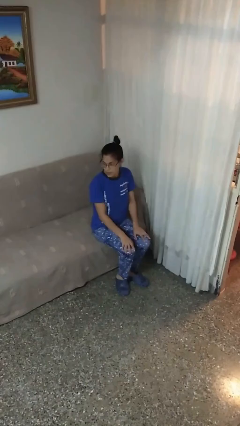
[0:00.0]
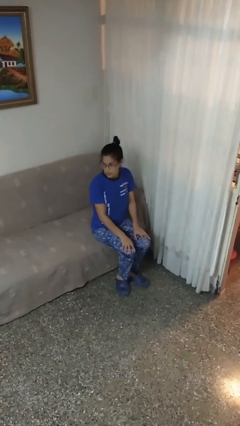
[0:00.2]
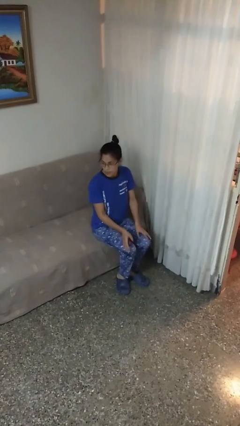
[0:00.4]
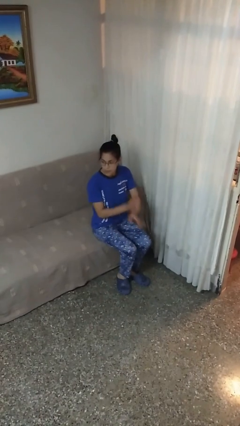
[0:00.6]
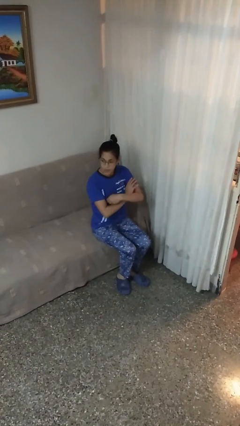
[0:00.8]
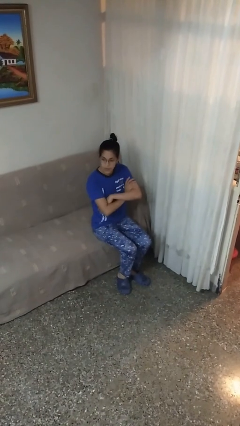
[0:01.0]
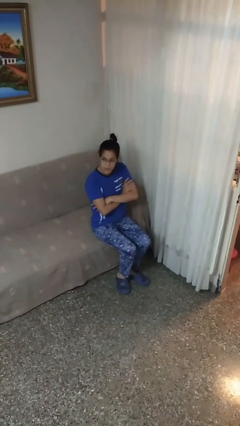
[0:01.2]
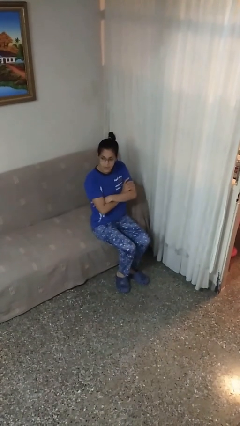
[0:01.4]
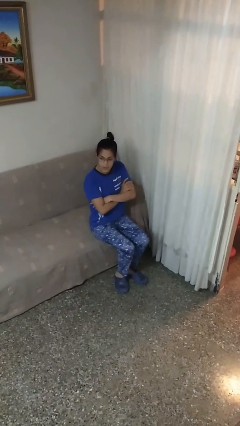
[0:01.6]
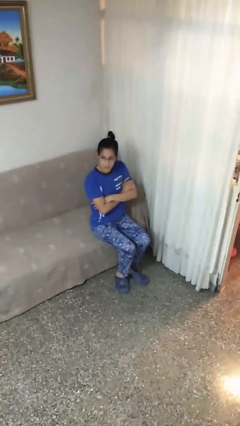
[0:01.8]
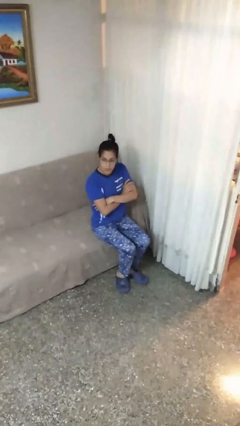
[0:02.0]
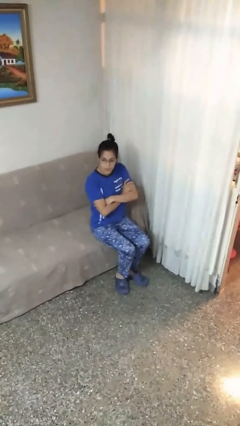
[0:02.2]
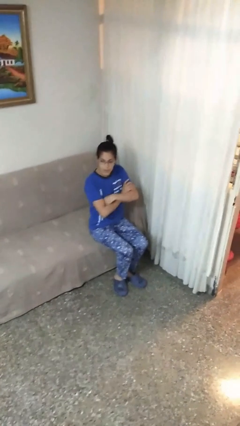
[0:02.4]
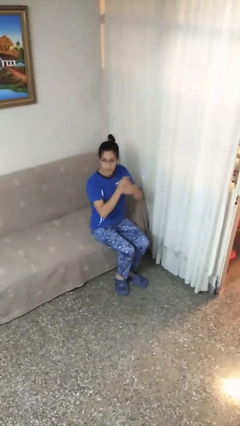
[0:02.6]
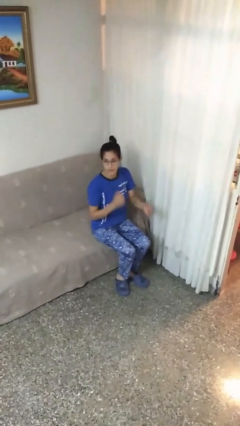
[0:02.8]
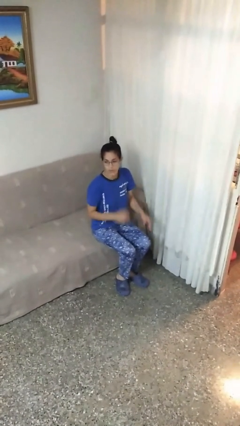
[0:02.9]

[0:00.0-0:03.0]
person crosses arms

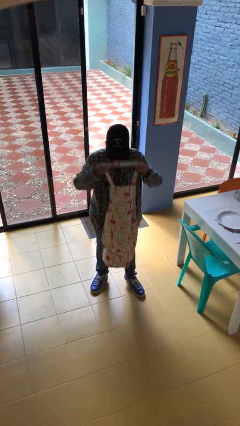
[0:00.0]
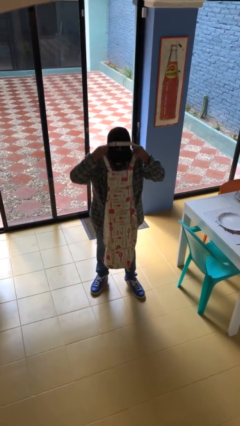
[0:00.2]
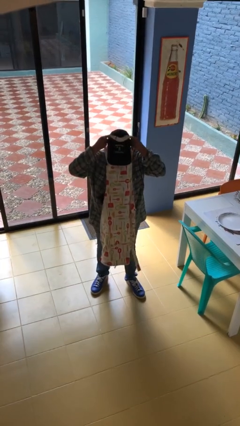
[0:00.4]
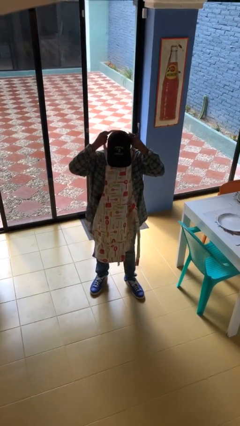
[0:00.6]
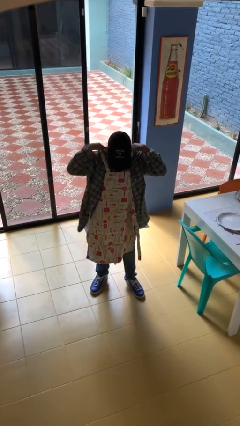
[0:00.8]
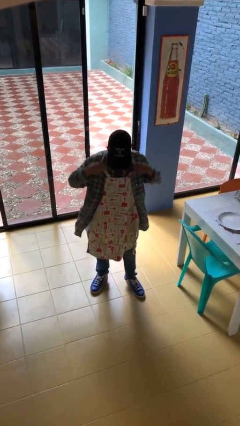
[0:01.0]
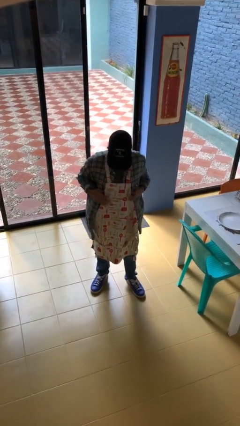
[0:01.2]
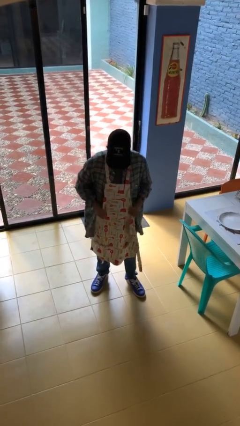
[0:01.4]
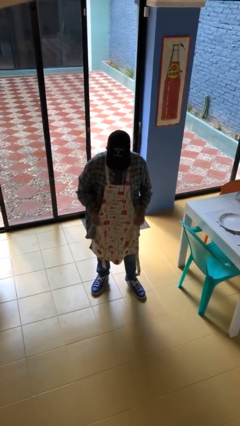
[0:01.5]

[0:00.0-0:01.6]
person puts on apron

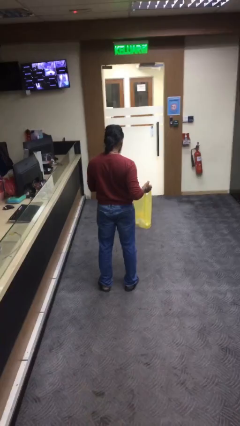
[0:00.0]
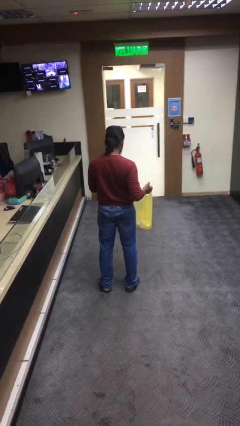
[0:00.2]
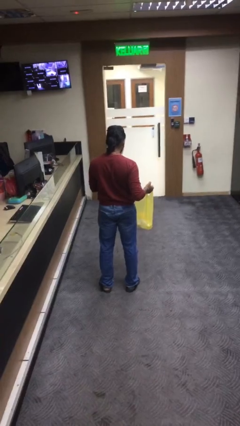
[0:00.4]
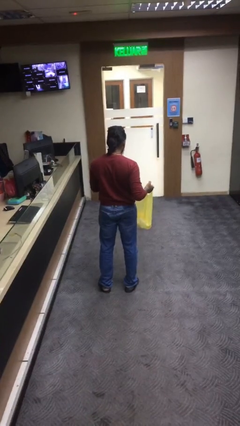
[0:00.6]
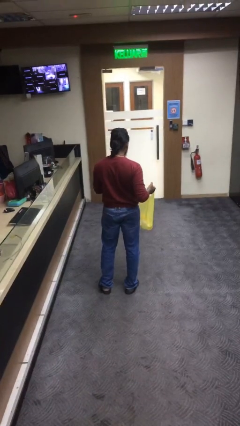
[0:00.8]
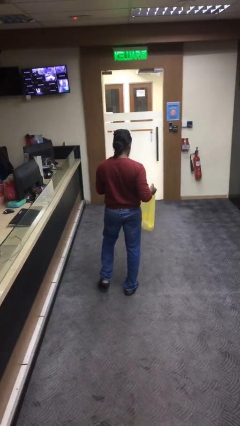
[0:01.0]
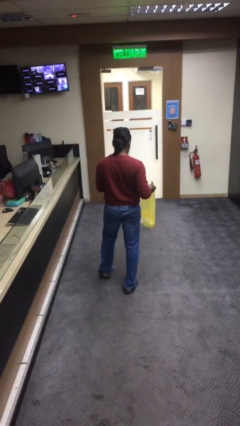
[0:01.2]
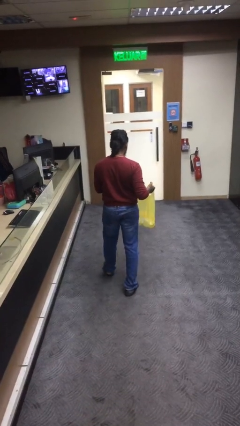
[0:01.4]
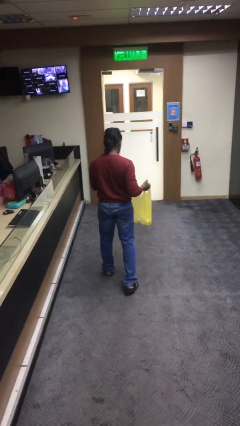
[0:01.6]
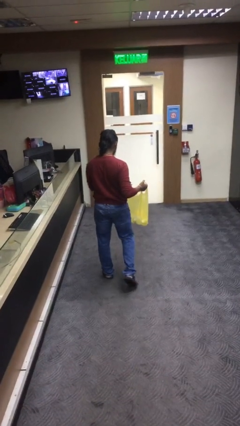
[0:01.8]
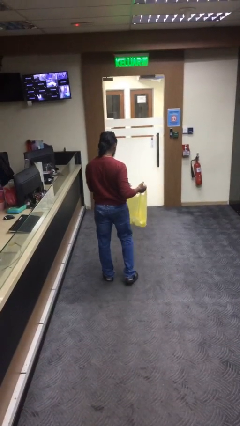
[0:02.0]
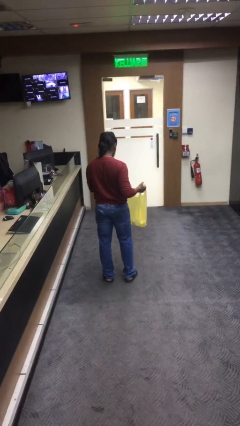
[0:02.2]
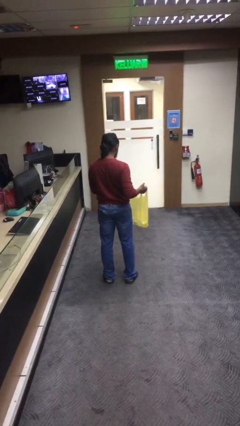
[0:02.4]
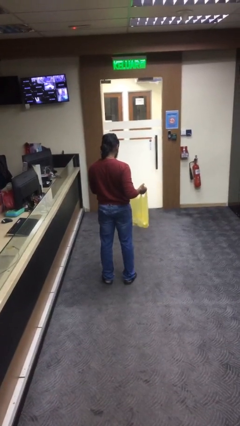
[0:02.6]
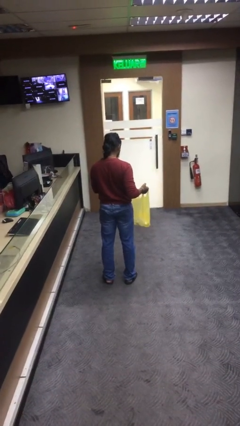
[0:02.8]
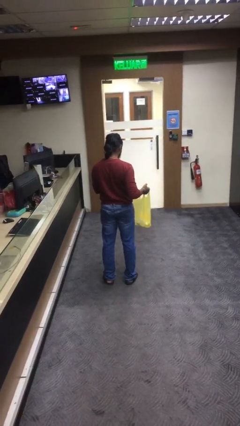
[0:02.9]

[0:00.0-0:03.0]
person carries groceries

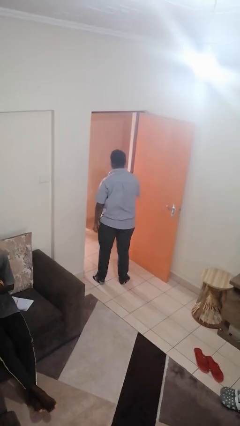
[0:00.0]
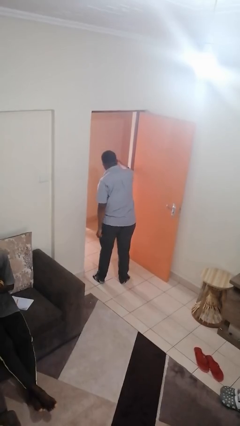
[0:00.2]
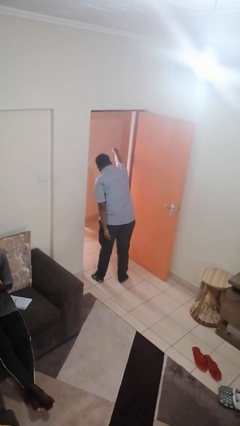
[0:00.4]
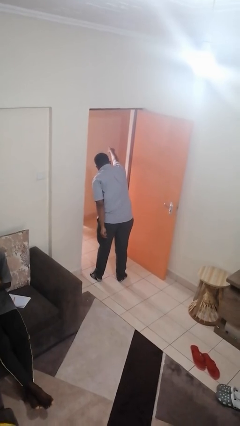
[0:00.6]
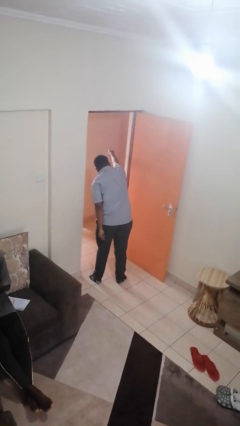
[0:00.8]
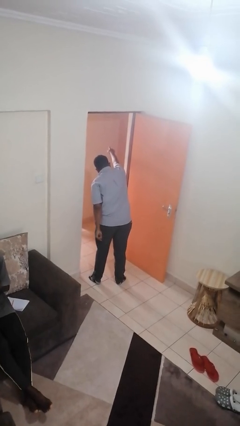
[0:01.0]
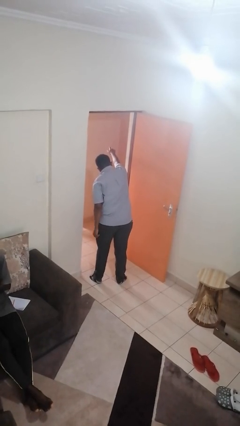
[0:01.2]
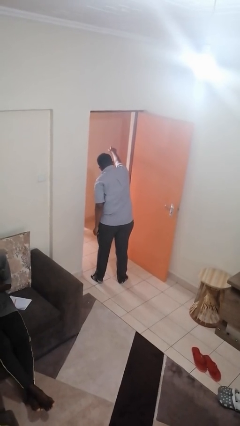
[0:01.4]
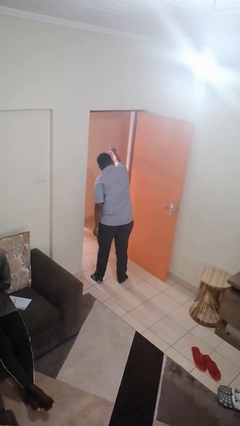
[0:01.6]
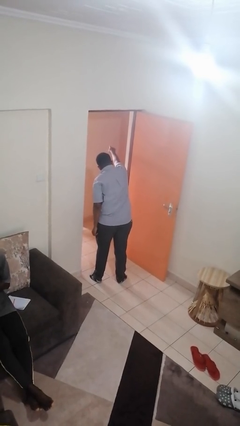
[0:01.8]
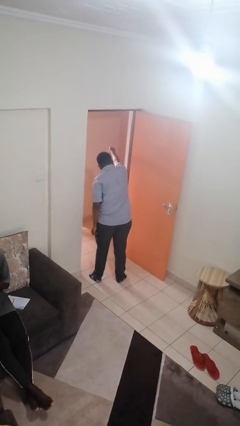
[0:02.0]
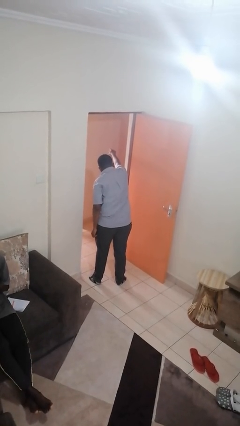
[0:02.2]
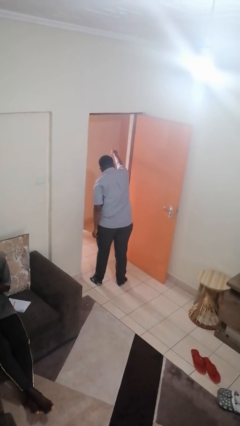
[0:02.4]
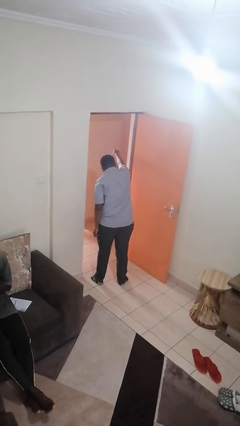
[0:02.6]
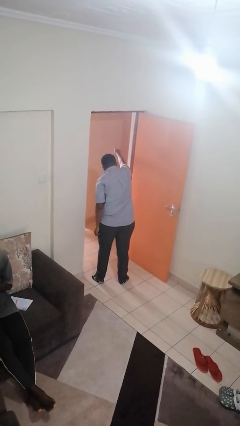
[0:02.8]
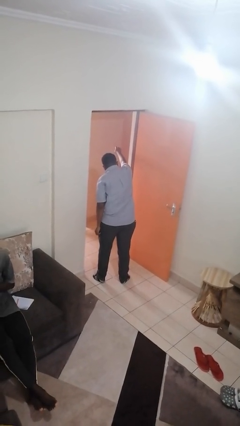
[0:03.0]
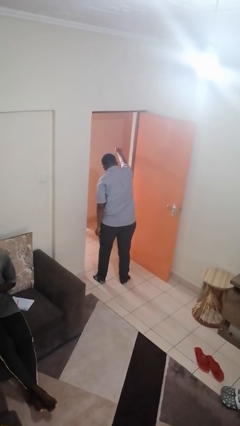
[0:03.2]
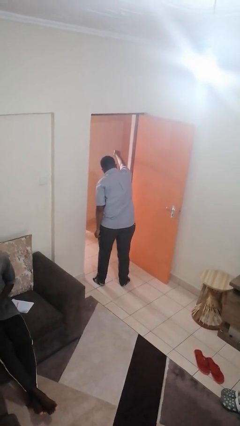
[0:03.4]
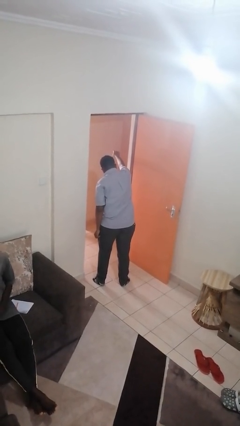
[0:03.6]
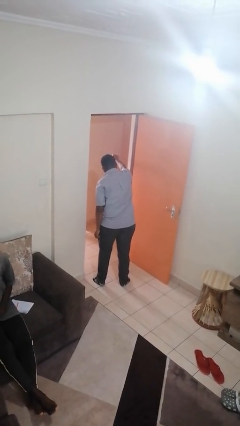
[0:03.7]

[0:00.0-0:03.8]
person points at person

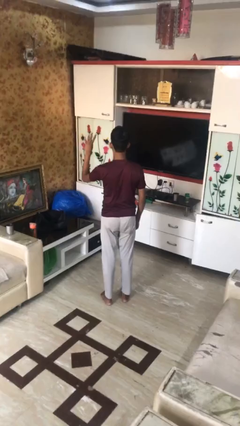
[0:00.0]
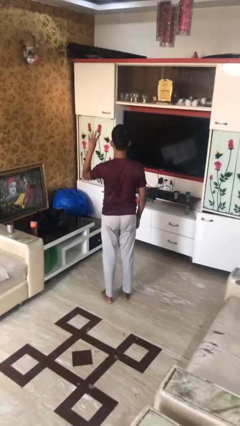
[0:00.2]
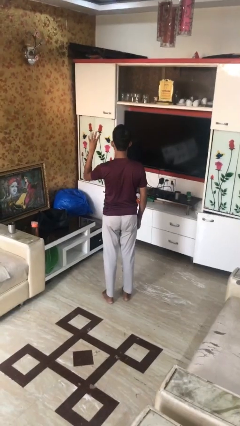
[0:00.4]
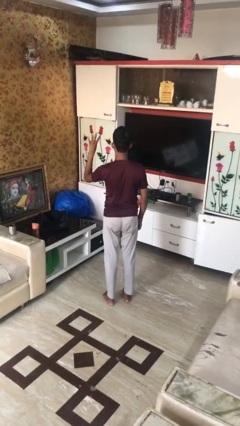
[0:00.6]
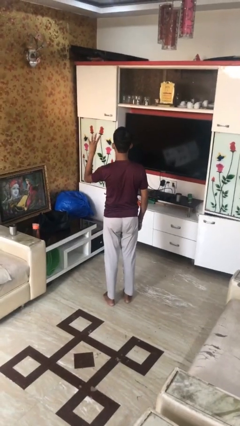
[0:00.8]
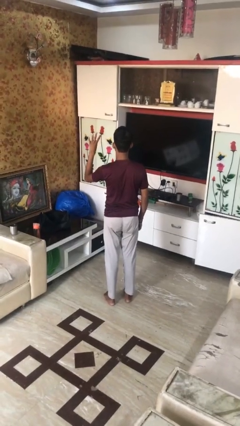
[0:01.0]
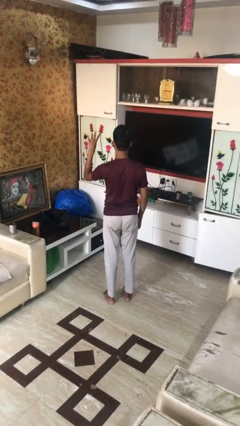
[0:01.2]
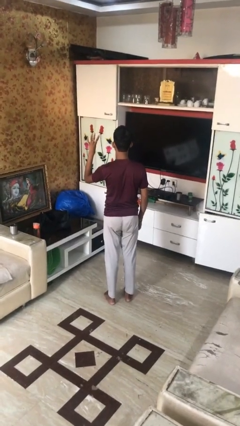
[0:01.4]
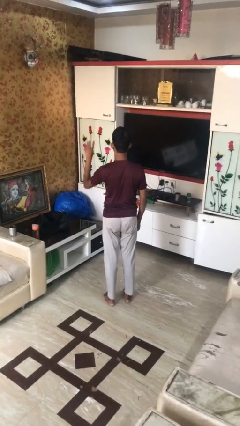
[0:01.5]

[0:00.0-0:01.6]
person gestures number four

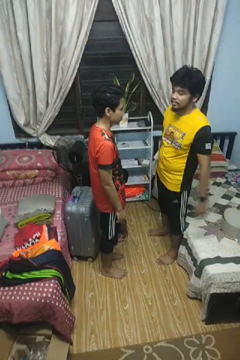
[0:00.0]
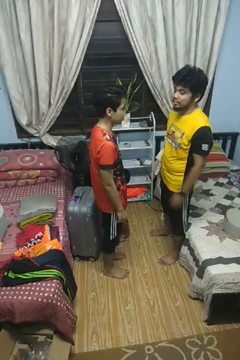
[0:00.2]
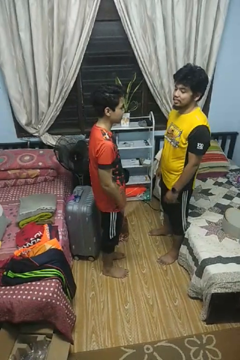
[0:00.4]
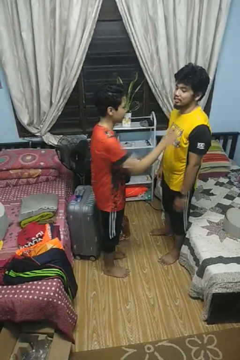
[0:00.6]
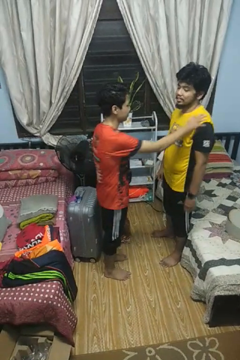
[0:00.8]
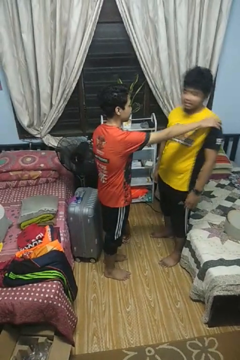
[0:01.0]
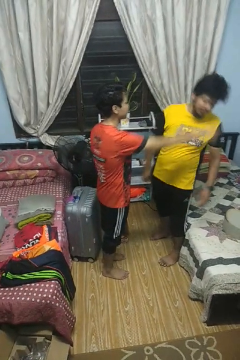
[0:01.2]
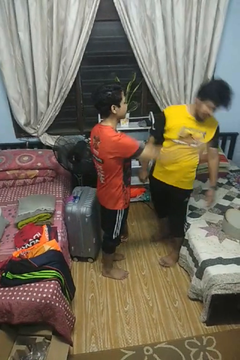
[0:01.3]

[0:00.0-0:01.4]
person shoves person

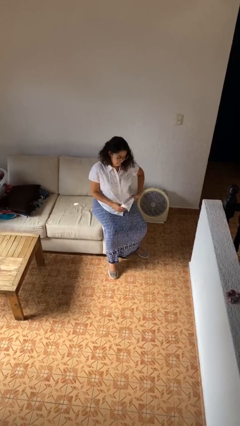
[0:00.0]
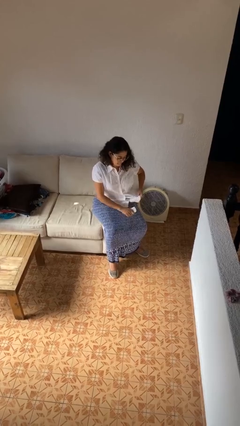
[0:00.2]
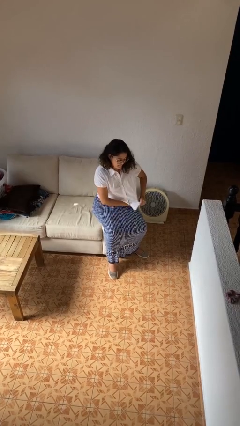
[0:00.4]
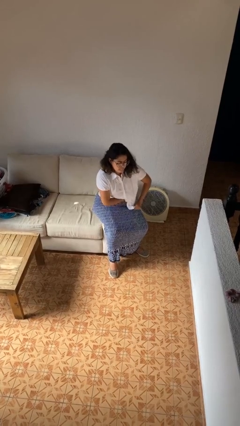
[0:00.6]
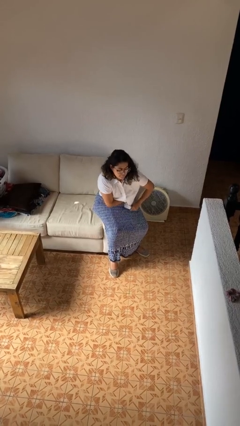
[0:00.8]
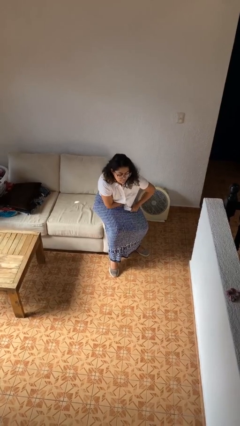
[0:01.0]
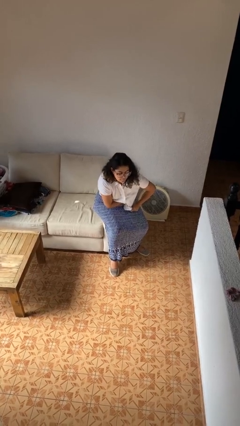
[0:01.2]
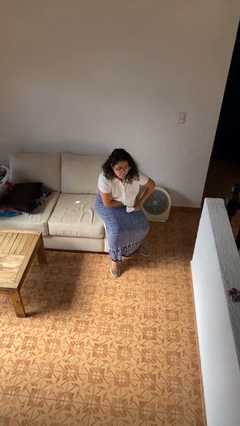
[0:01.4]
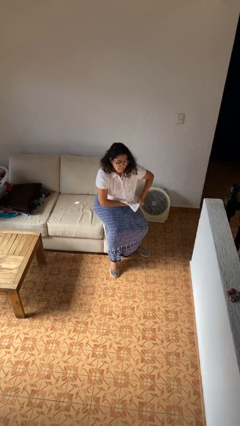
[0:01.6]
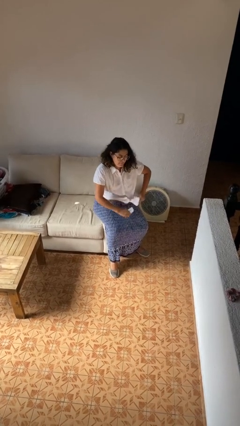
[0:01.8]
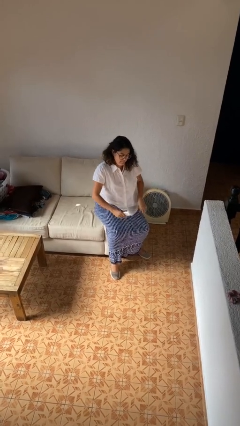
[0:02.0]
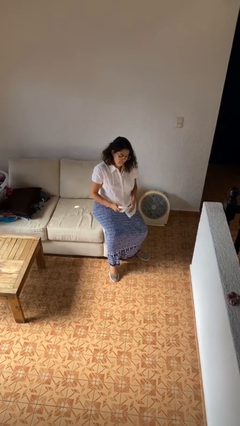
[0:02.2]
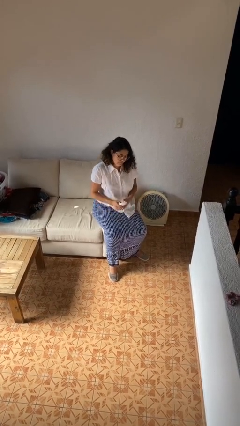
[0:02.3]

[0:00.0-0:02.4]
person applies deodorant

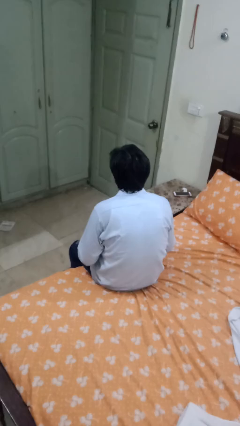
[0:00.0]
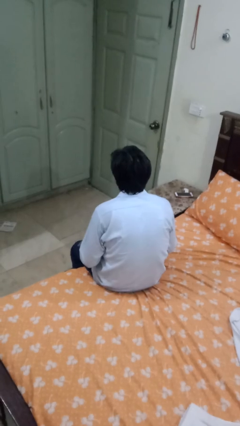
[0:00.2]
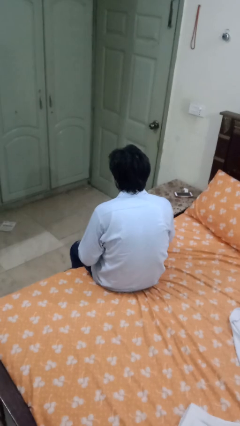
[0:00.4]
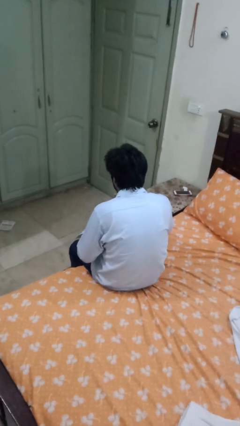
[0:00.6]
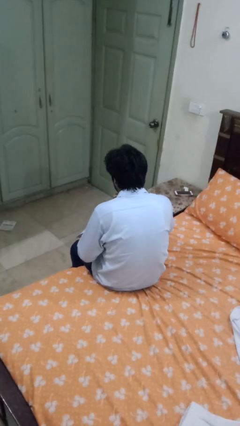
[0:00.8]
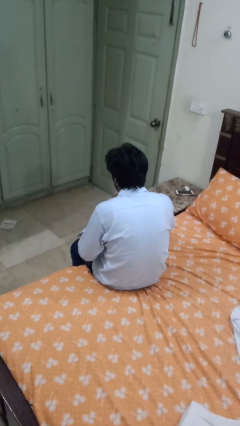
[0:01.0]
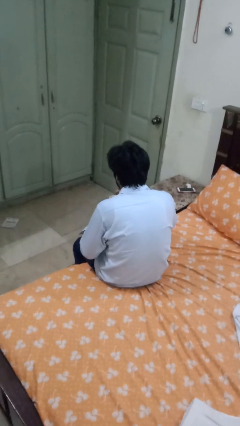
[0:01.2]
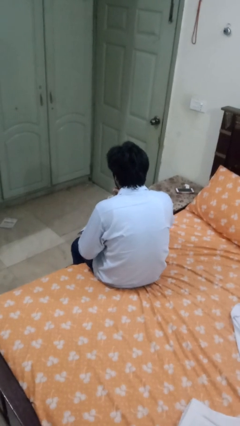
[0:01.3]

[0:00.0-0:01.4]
person stirs mug
